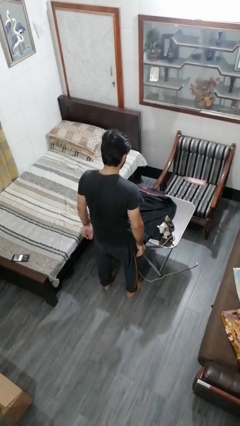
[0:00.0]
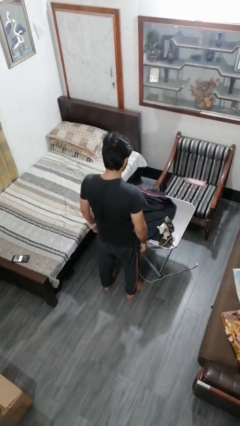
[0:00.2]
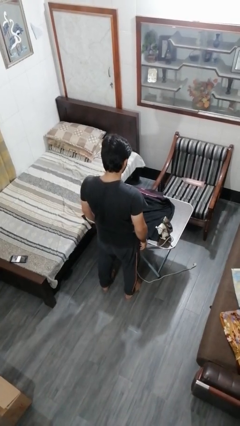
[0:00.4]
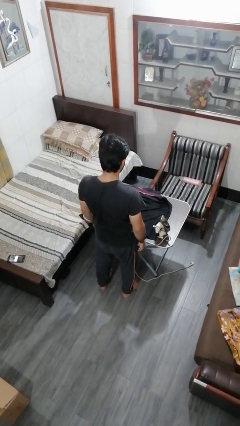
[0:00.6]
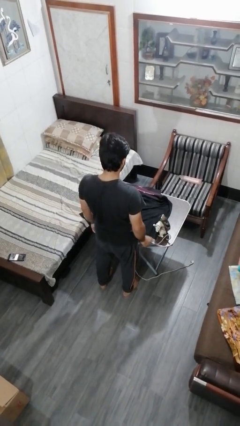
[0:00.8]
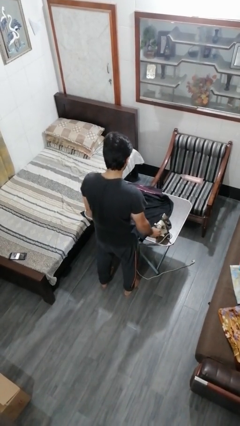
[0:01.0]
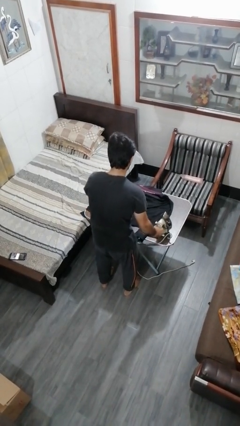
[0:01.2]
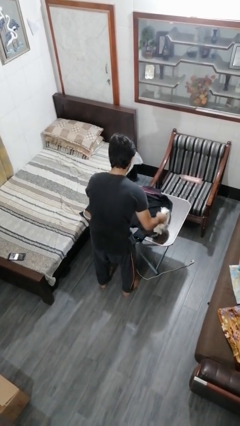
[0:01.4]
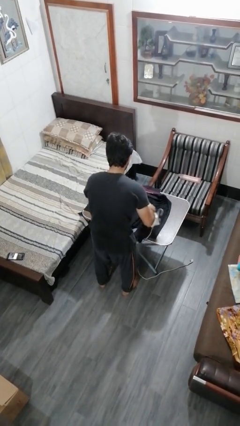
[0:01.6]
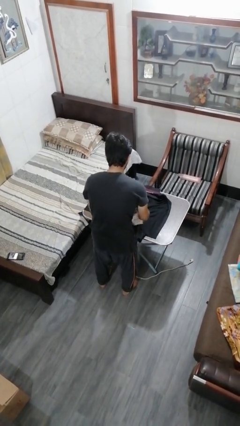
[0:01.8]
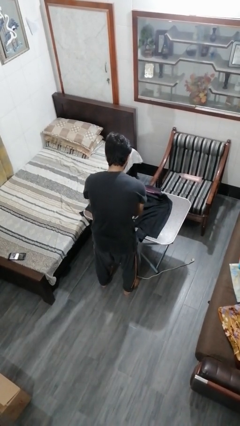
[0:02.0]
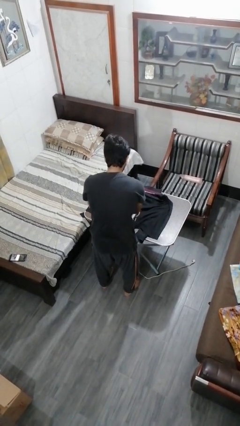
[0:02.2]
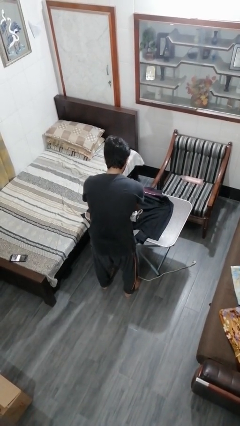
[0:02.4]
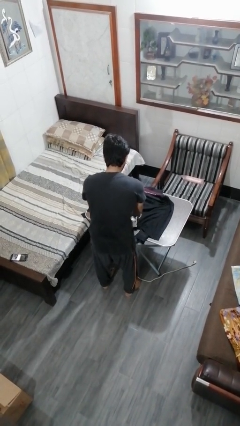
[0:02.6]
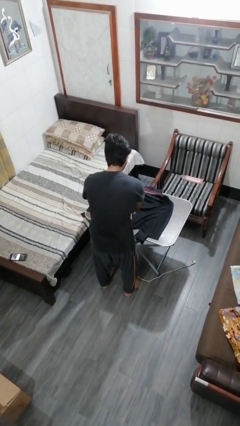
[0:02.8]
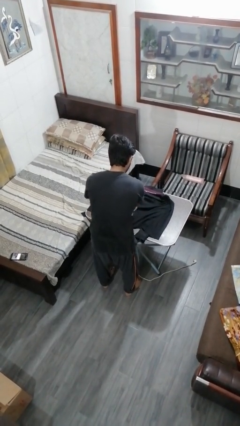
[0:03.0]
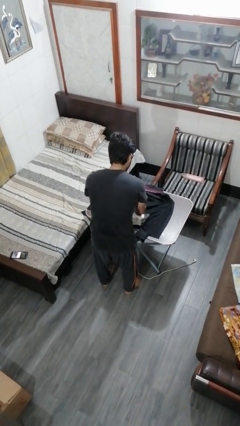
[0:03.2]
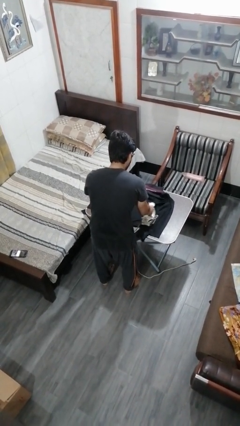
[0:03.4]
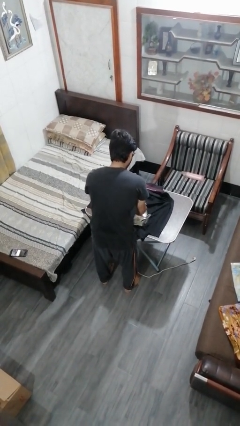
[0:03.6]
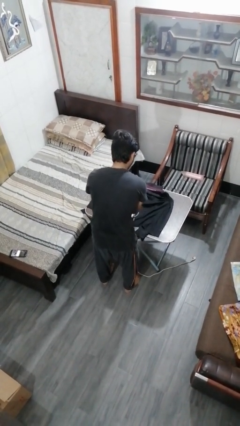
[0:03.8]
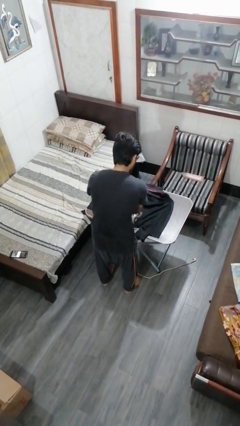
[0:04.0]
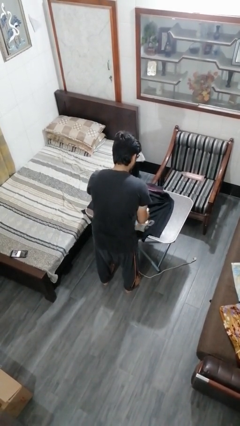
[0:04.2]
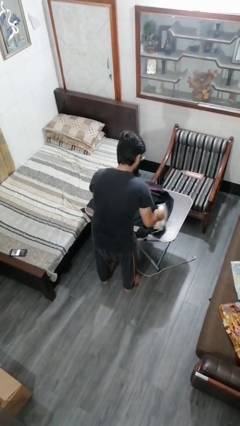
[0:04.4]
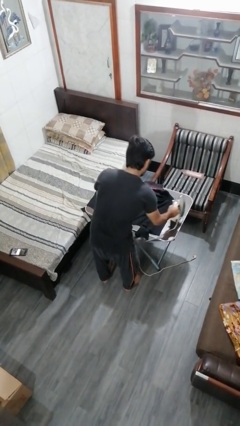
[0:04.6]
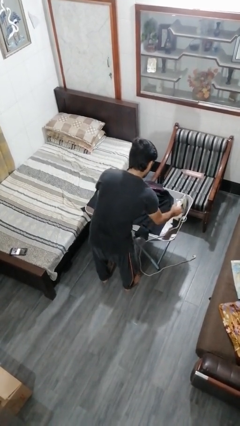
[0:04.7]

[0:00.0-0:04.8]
person irons clothes

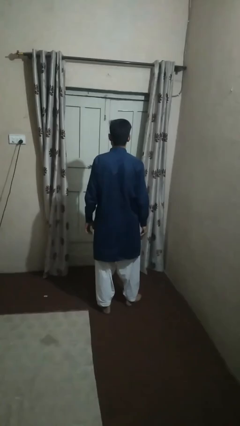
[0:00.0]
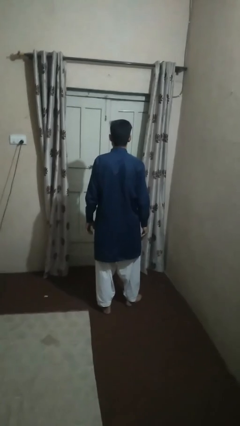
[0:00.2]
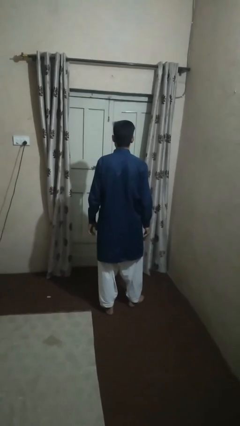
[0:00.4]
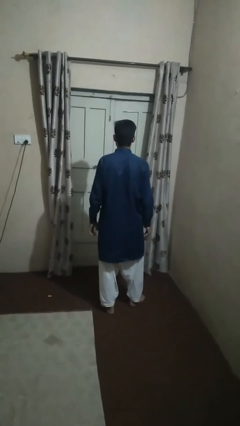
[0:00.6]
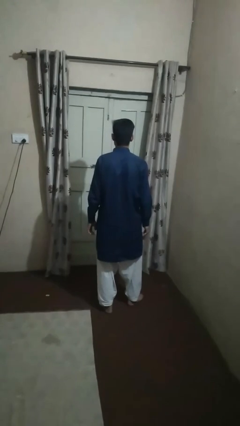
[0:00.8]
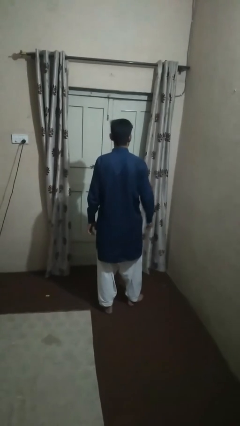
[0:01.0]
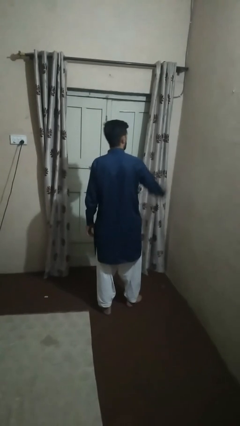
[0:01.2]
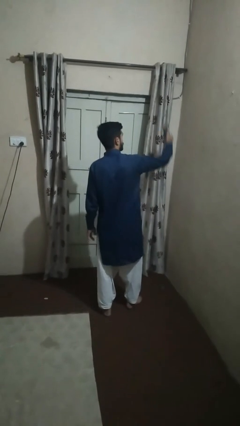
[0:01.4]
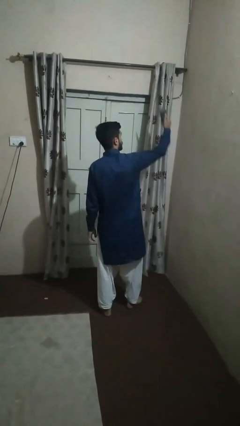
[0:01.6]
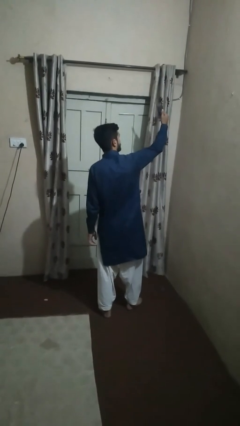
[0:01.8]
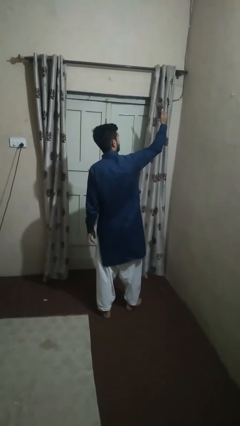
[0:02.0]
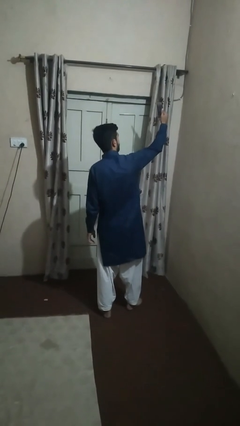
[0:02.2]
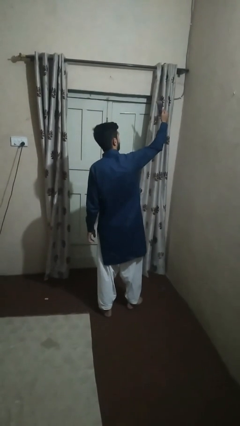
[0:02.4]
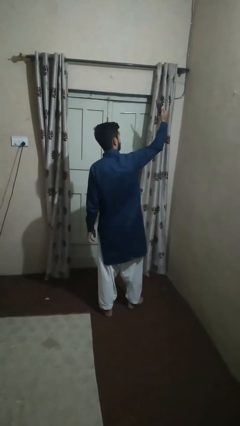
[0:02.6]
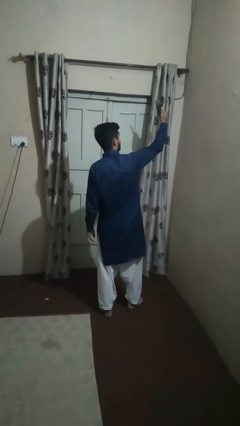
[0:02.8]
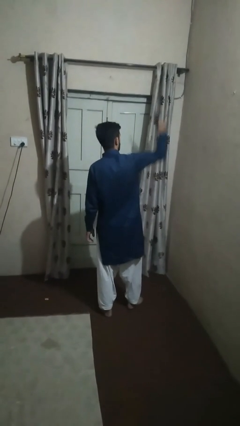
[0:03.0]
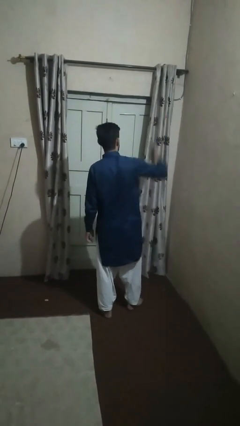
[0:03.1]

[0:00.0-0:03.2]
person takes selfie

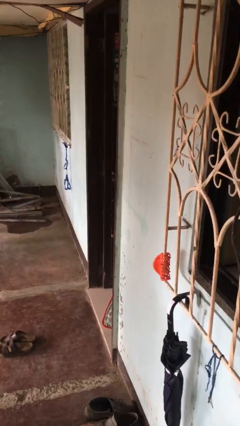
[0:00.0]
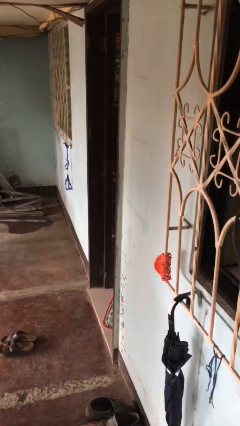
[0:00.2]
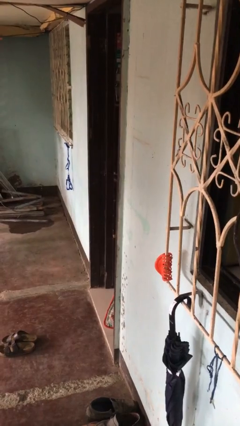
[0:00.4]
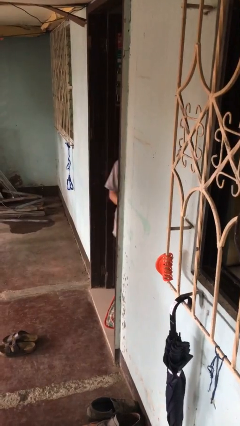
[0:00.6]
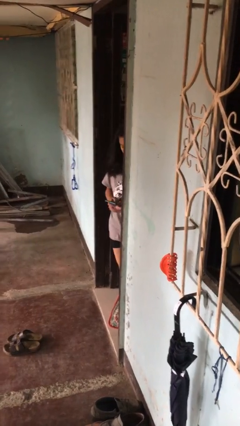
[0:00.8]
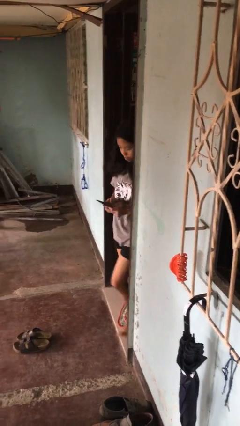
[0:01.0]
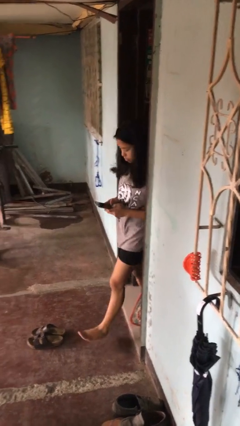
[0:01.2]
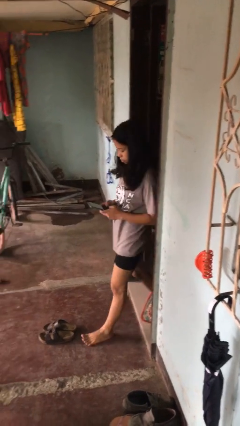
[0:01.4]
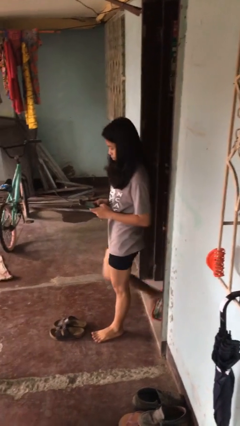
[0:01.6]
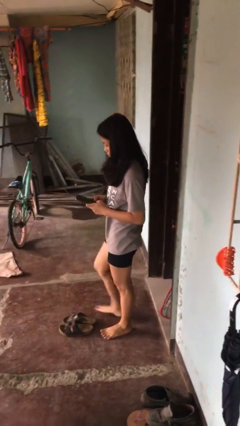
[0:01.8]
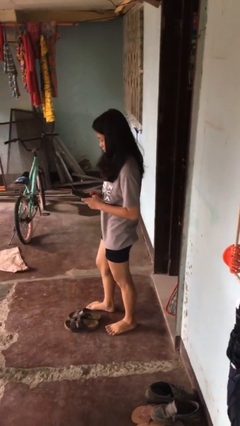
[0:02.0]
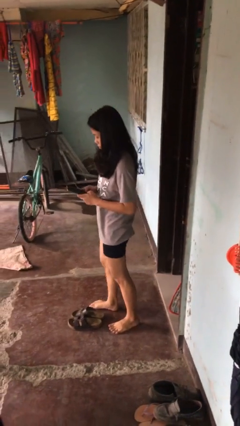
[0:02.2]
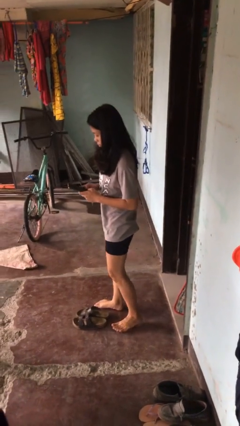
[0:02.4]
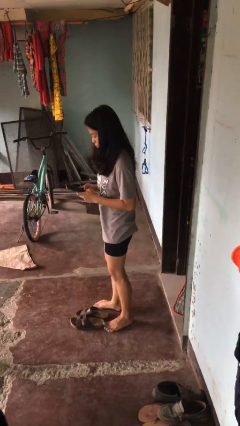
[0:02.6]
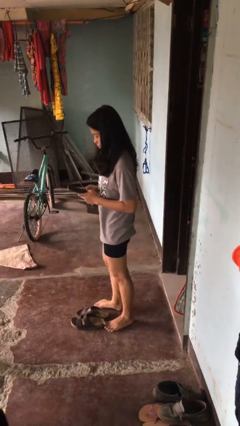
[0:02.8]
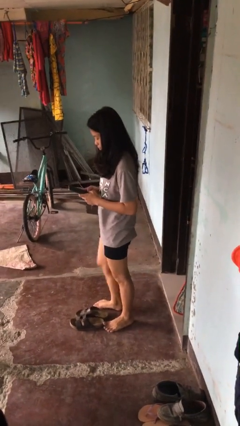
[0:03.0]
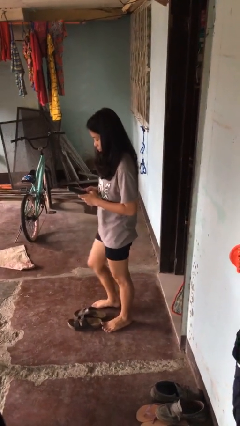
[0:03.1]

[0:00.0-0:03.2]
person enters scene through structure

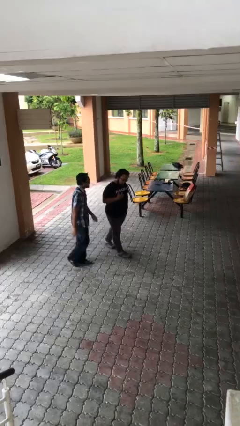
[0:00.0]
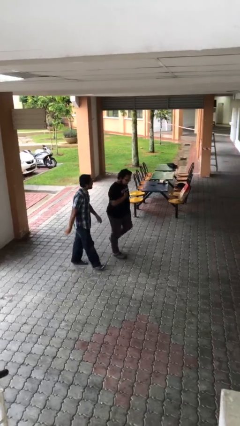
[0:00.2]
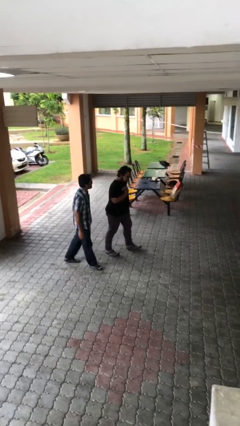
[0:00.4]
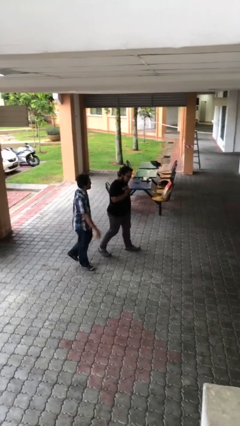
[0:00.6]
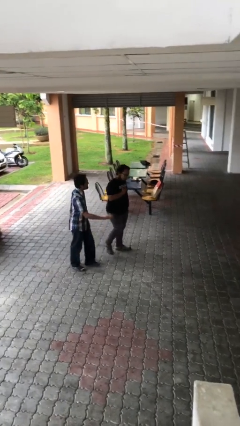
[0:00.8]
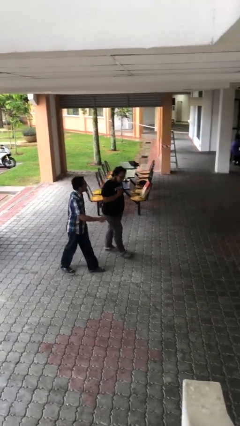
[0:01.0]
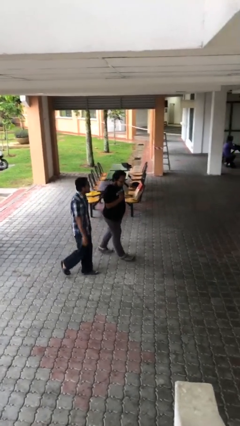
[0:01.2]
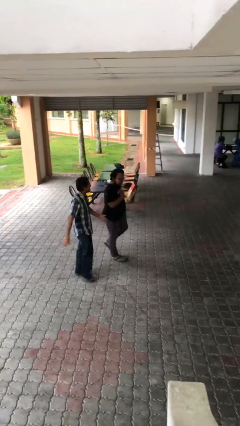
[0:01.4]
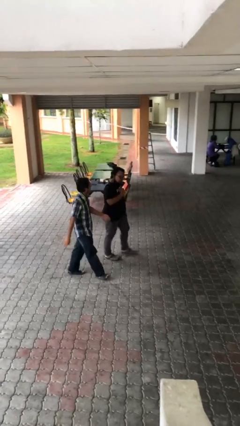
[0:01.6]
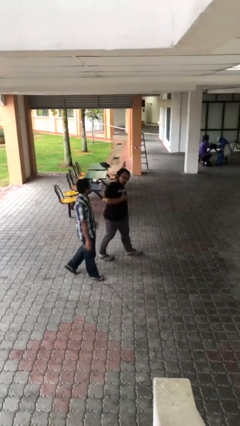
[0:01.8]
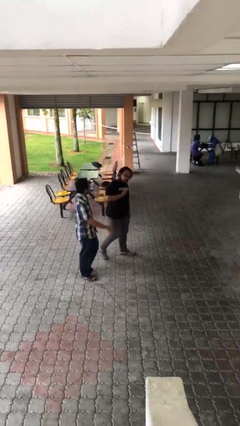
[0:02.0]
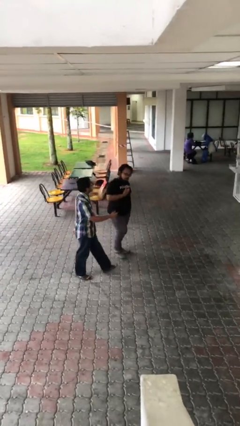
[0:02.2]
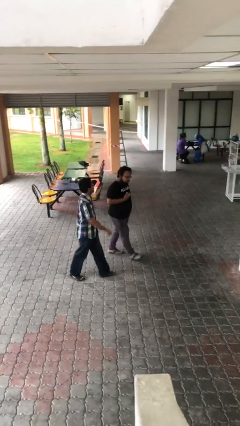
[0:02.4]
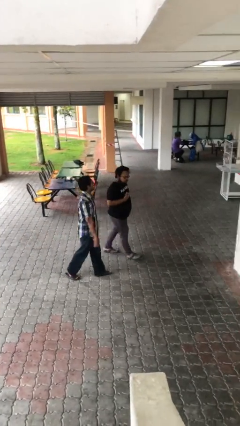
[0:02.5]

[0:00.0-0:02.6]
person talks to person

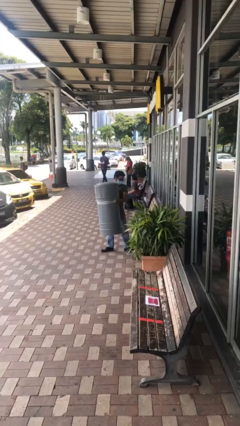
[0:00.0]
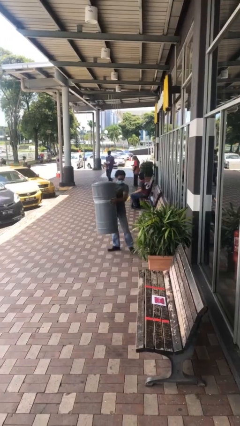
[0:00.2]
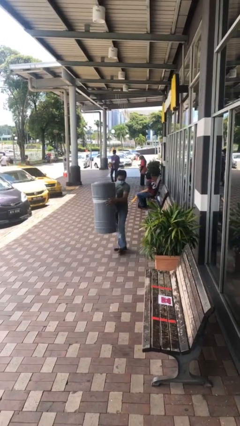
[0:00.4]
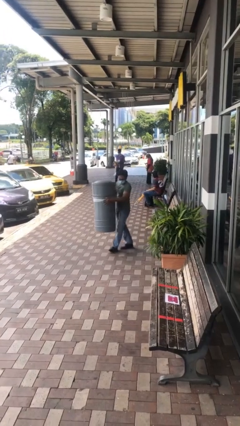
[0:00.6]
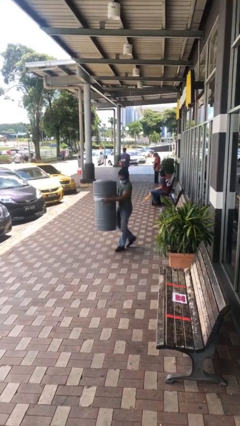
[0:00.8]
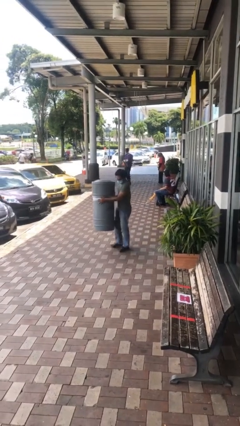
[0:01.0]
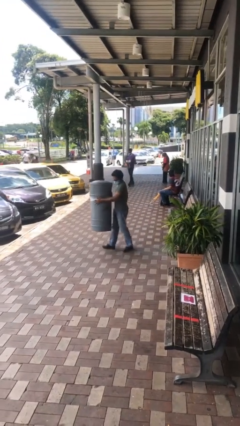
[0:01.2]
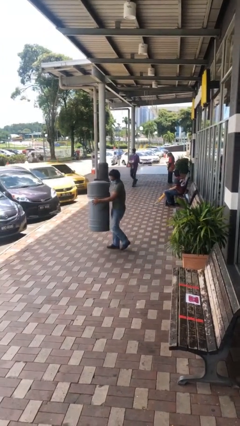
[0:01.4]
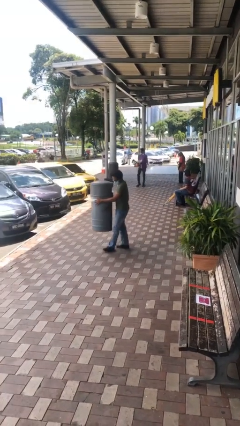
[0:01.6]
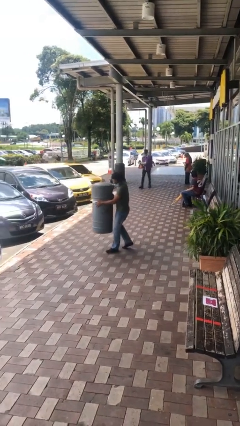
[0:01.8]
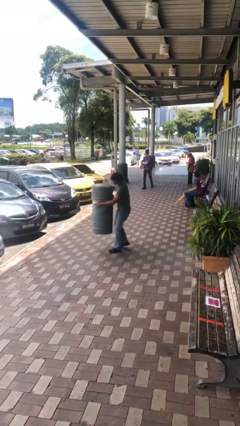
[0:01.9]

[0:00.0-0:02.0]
person carries heavy object

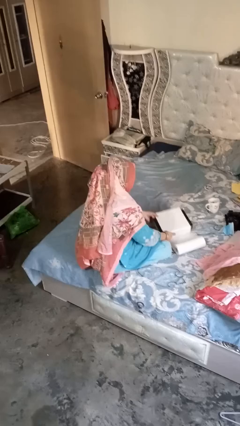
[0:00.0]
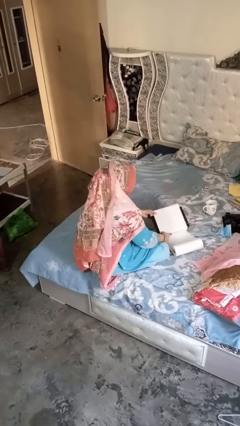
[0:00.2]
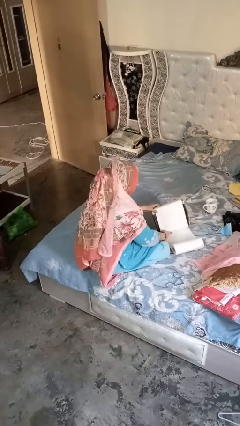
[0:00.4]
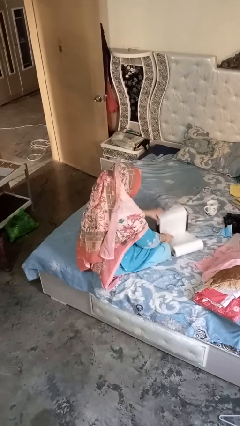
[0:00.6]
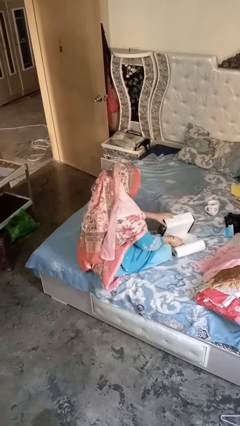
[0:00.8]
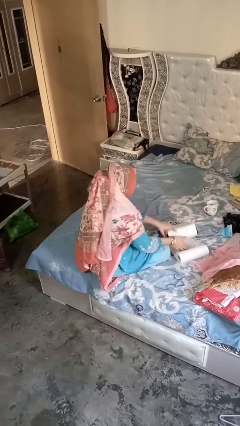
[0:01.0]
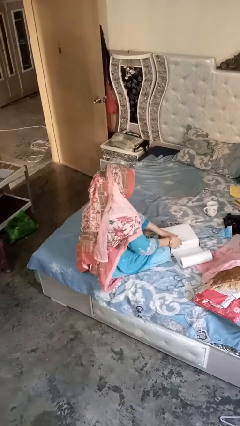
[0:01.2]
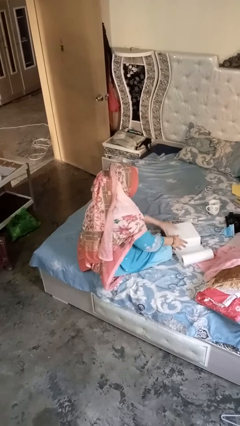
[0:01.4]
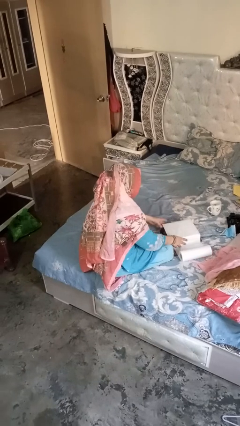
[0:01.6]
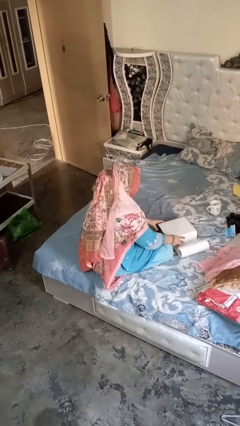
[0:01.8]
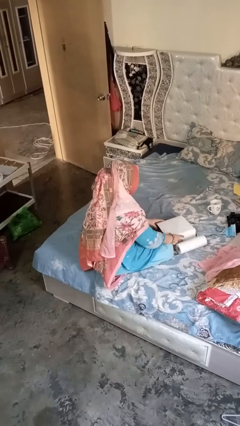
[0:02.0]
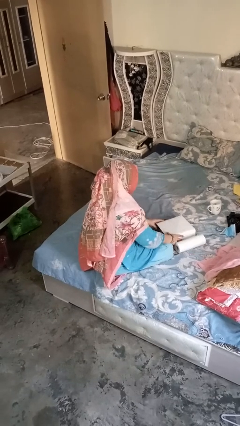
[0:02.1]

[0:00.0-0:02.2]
person wraps box
